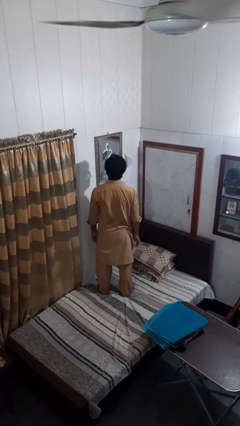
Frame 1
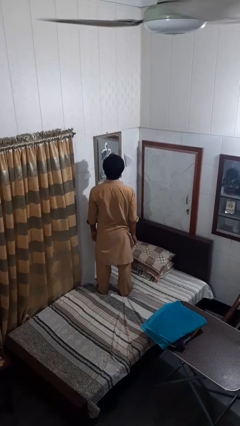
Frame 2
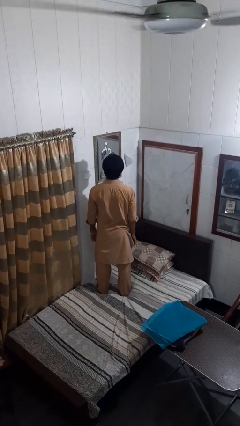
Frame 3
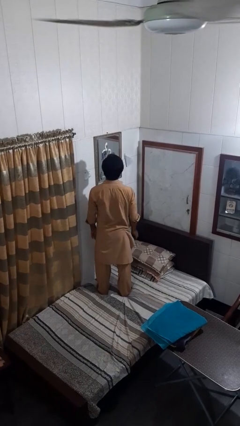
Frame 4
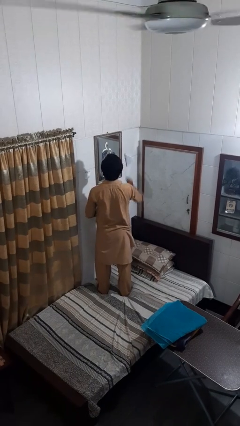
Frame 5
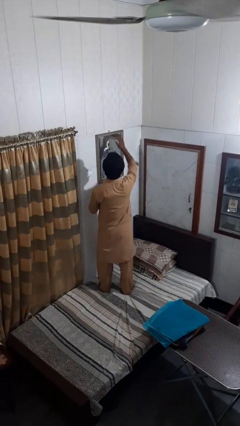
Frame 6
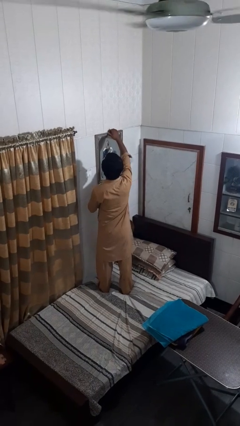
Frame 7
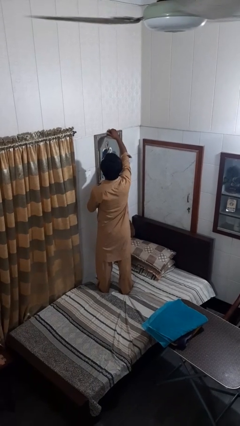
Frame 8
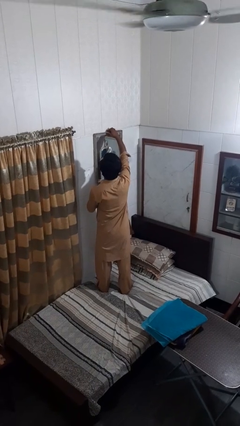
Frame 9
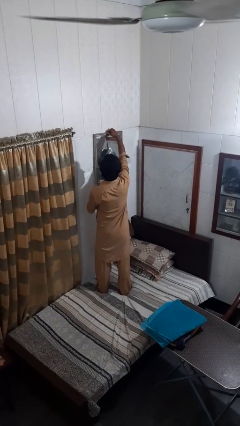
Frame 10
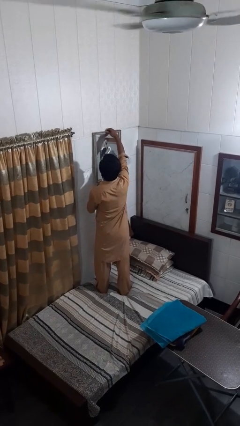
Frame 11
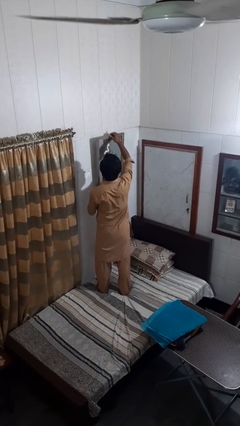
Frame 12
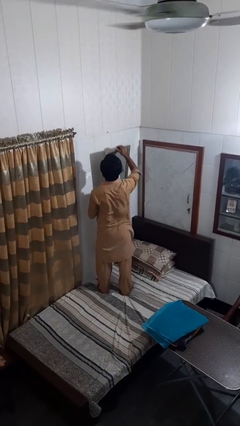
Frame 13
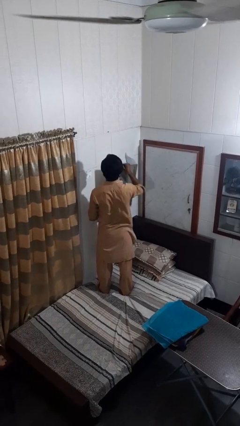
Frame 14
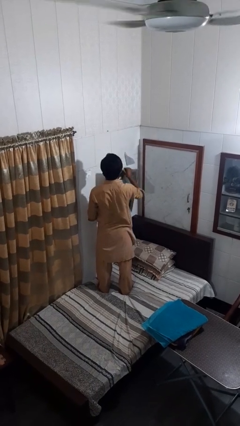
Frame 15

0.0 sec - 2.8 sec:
person takes down picture frame

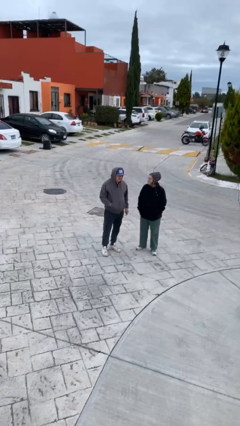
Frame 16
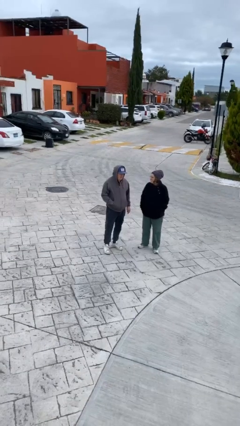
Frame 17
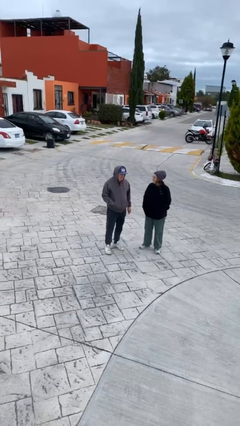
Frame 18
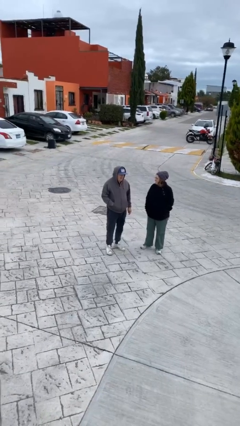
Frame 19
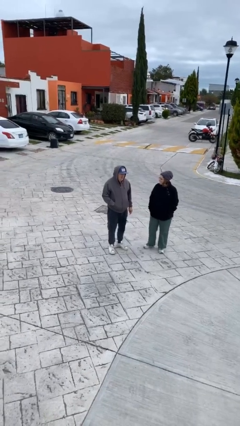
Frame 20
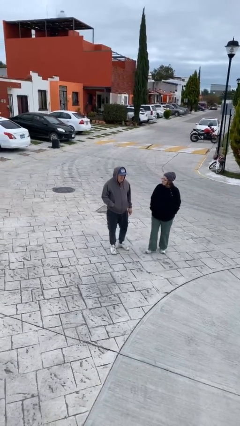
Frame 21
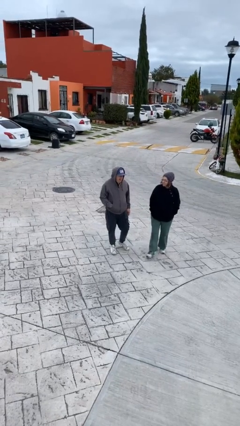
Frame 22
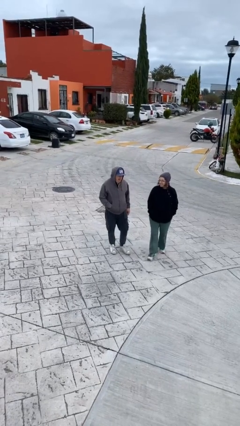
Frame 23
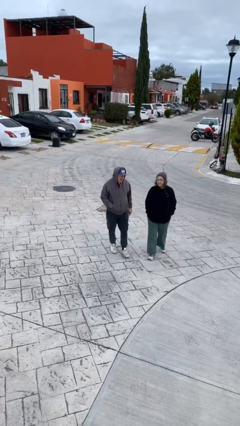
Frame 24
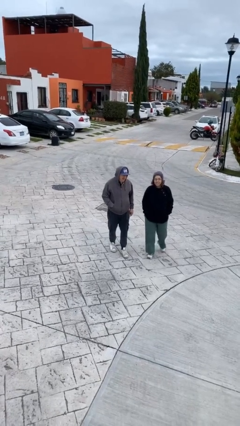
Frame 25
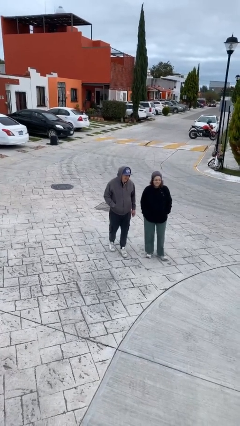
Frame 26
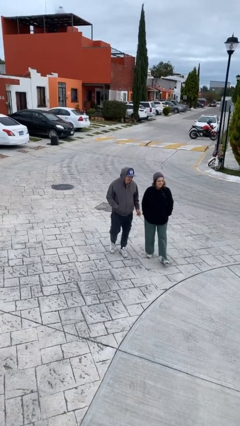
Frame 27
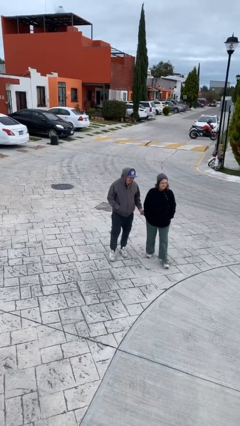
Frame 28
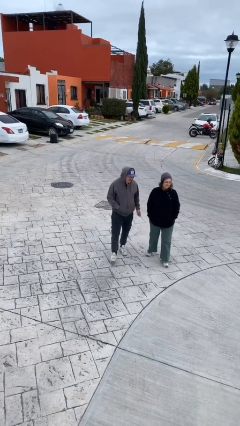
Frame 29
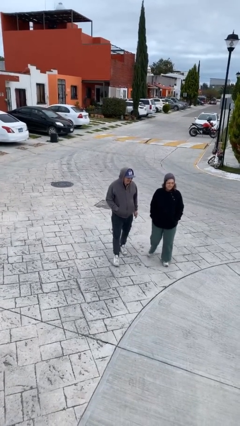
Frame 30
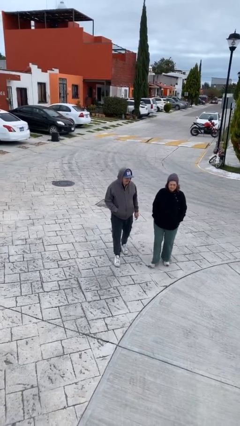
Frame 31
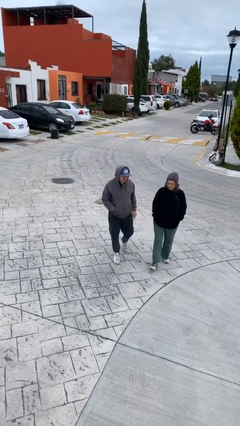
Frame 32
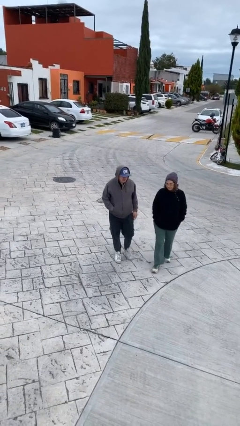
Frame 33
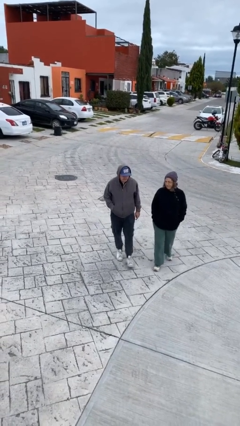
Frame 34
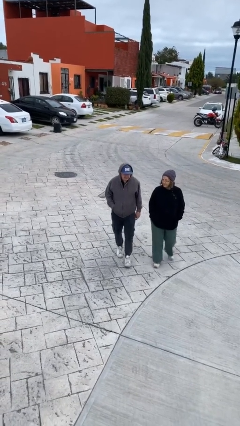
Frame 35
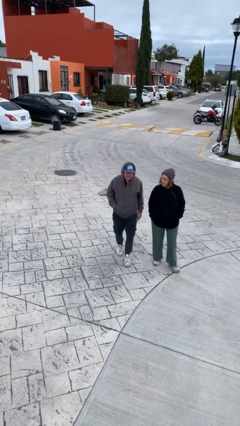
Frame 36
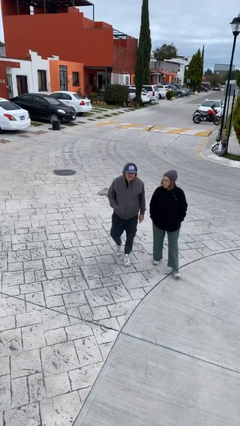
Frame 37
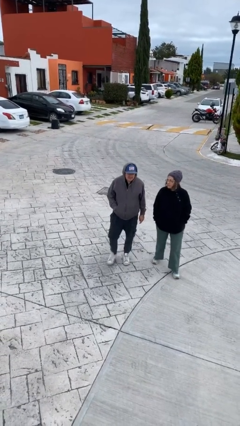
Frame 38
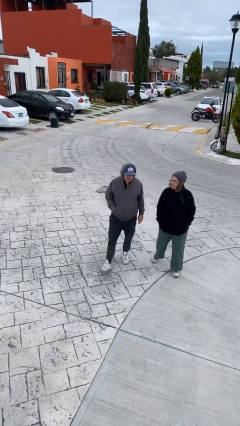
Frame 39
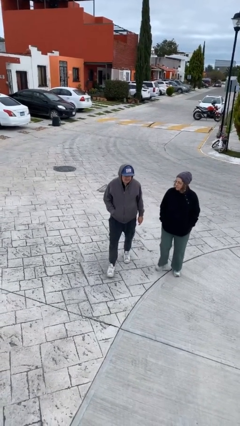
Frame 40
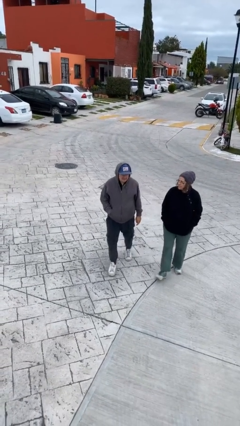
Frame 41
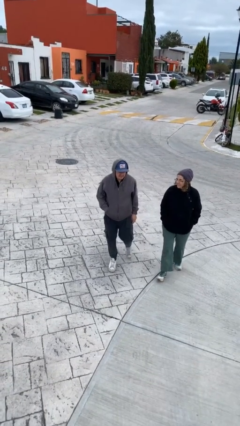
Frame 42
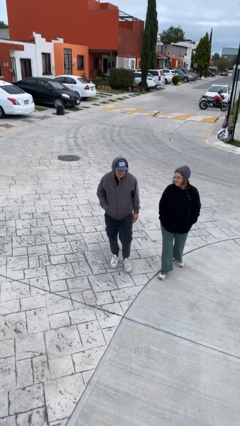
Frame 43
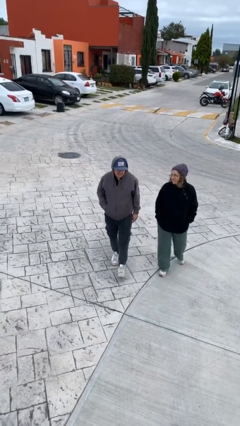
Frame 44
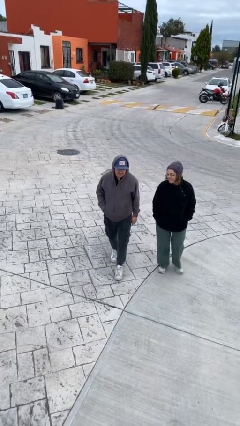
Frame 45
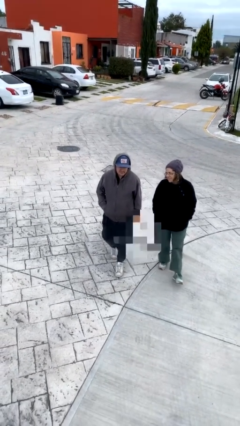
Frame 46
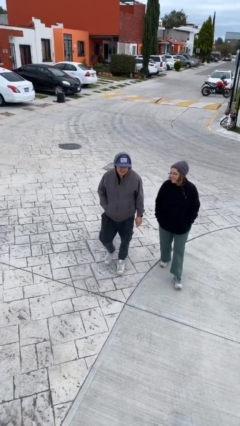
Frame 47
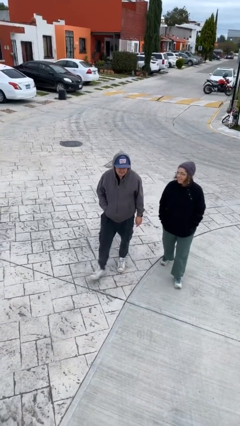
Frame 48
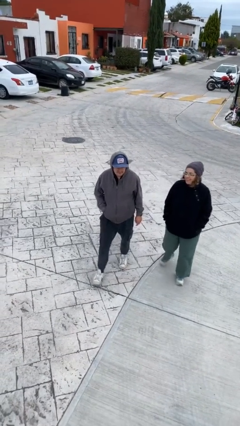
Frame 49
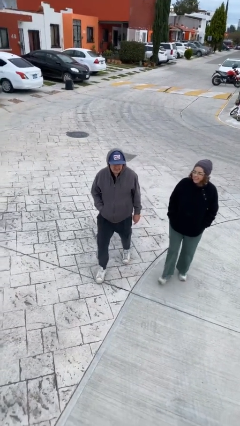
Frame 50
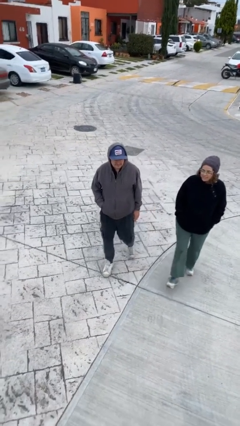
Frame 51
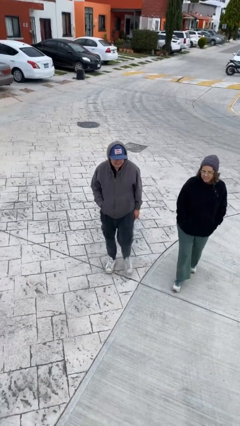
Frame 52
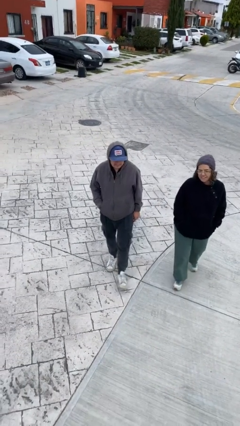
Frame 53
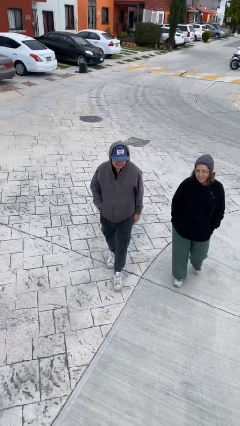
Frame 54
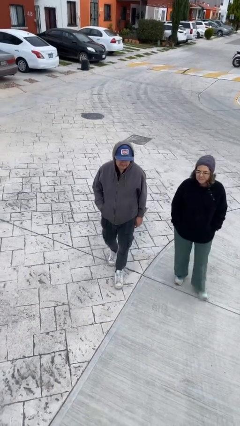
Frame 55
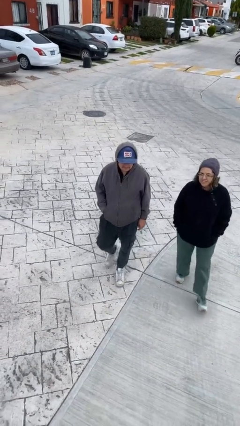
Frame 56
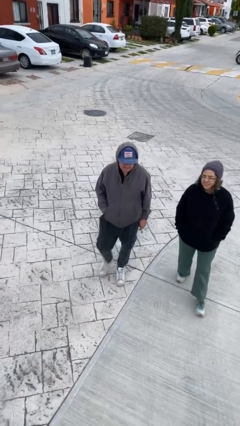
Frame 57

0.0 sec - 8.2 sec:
person talks to person

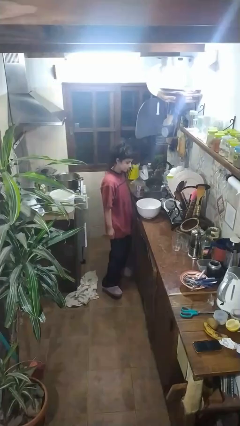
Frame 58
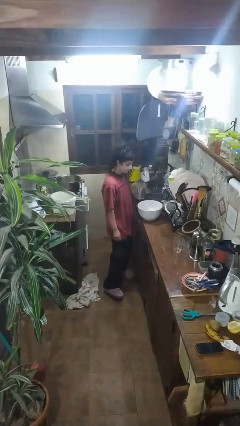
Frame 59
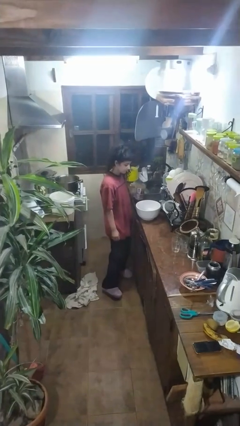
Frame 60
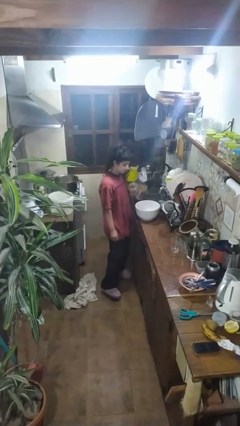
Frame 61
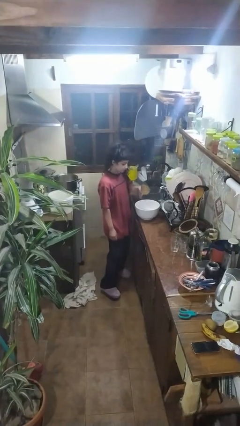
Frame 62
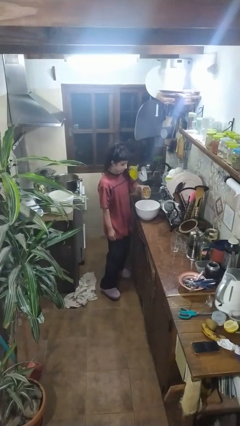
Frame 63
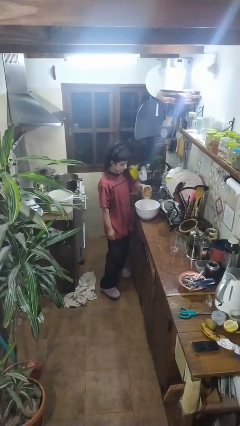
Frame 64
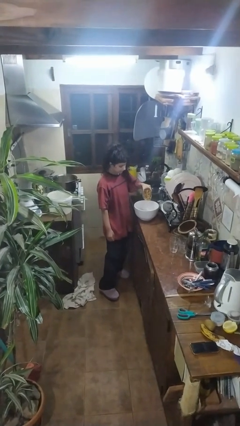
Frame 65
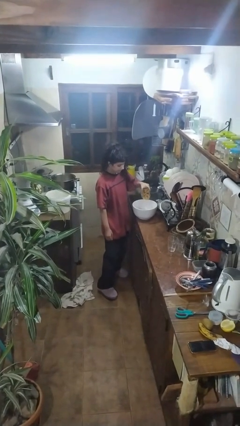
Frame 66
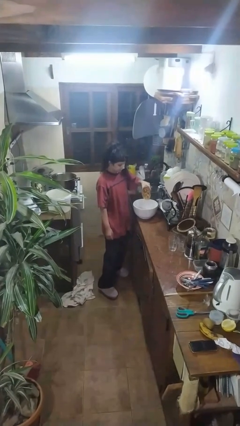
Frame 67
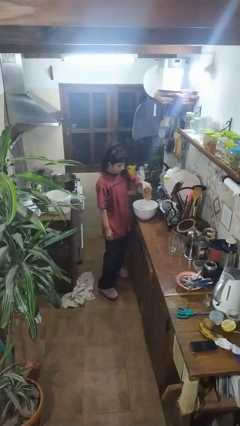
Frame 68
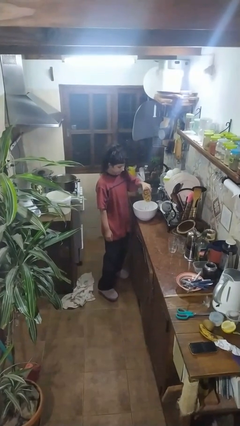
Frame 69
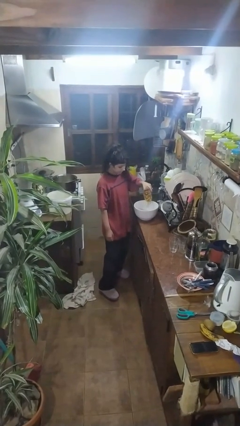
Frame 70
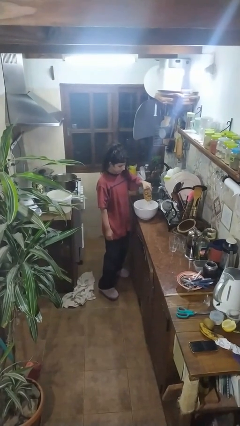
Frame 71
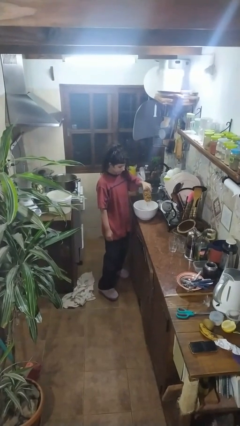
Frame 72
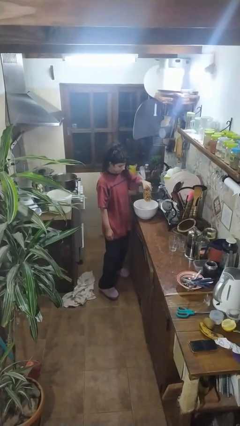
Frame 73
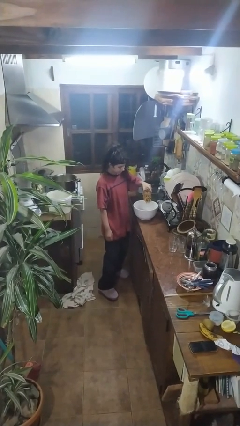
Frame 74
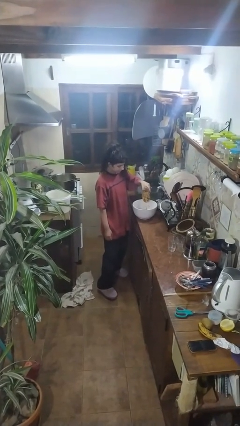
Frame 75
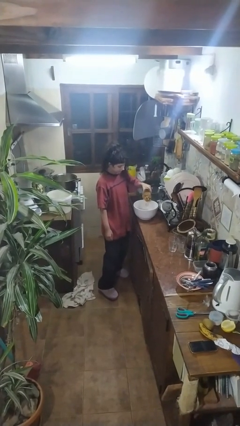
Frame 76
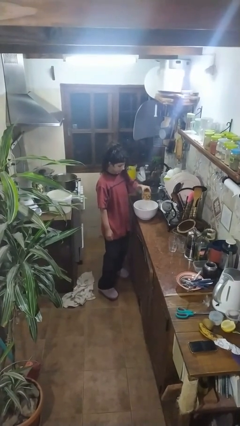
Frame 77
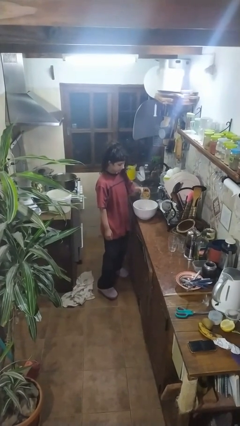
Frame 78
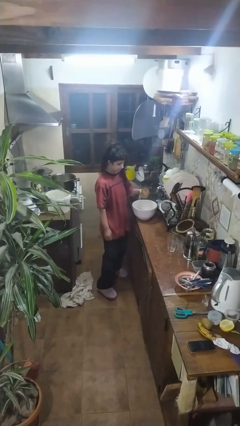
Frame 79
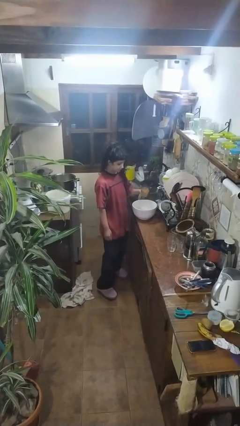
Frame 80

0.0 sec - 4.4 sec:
person pours into bowl

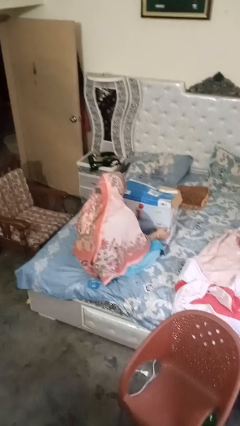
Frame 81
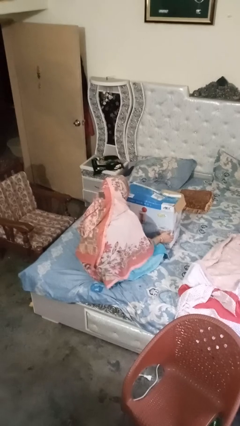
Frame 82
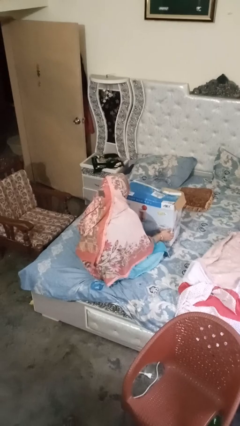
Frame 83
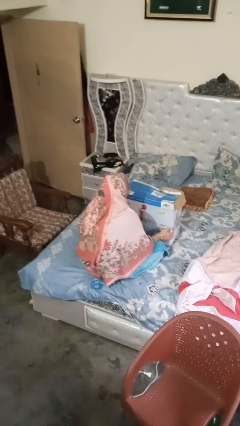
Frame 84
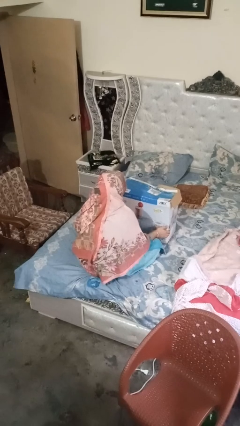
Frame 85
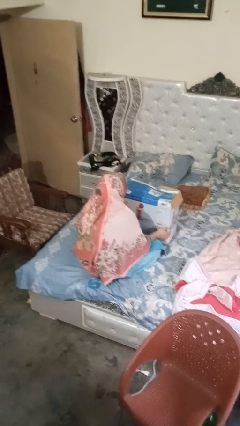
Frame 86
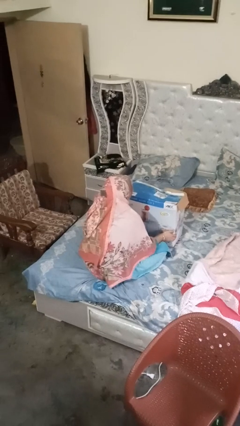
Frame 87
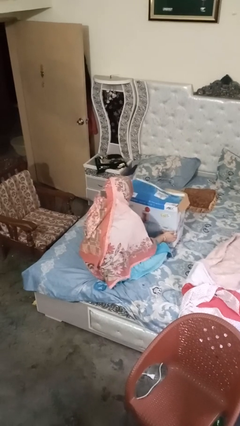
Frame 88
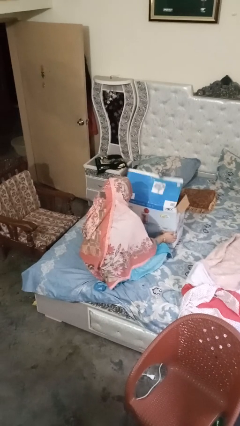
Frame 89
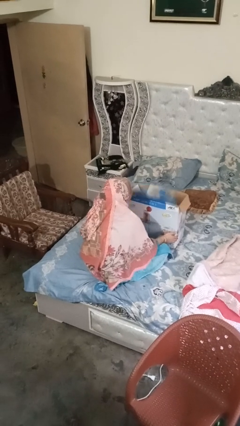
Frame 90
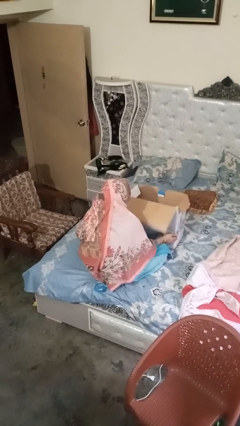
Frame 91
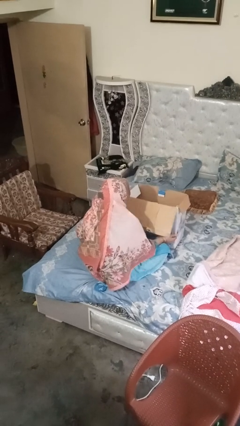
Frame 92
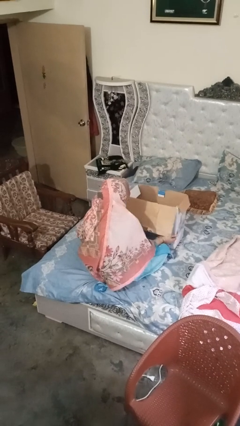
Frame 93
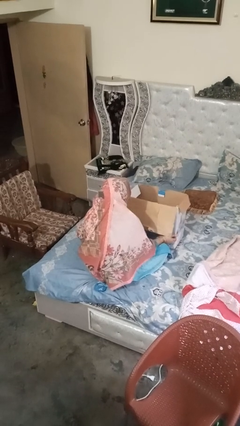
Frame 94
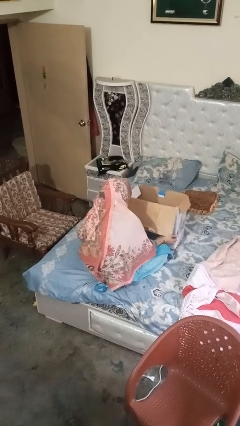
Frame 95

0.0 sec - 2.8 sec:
person opens box
